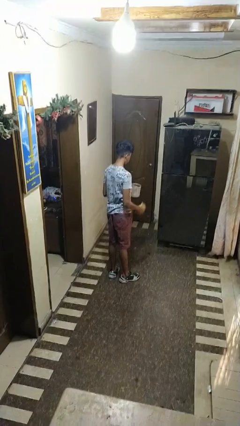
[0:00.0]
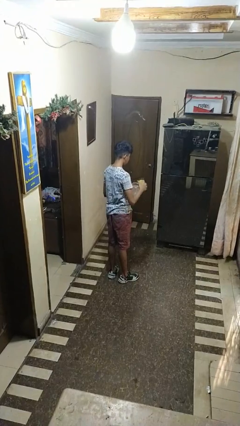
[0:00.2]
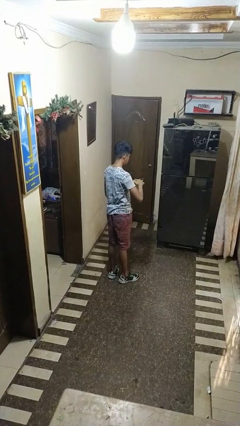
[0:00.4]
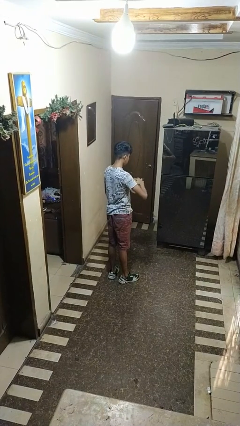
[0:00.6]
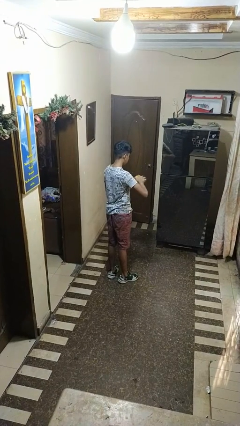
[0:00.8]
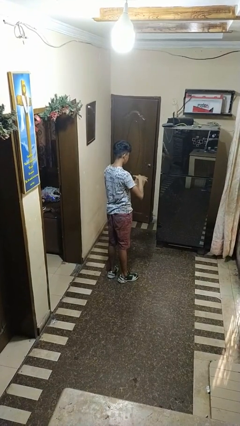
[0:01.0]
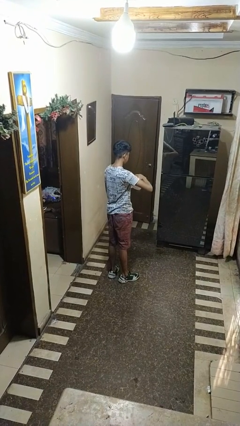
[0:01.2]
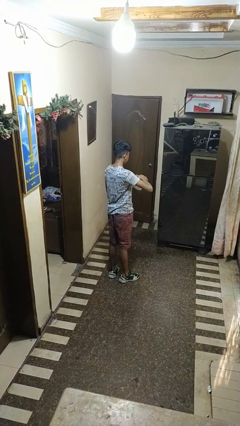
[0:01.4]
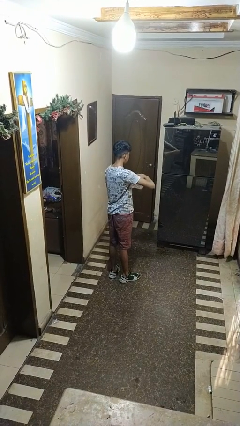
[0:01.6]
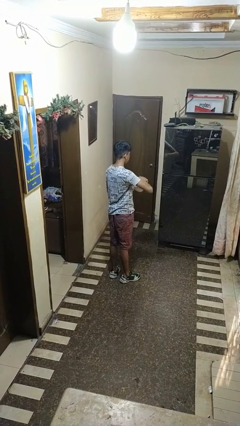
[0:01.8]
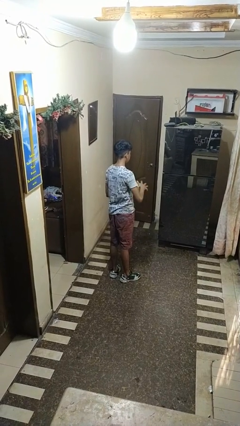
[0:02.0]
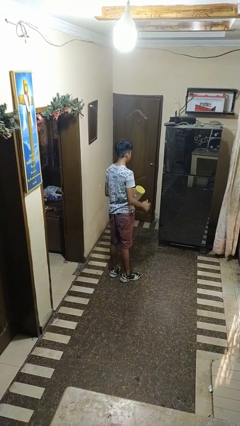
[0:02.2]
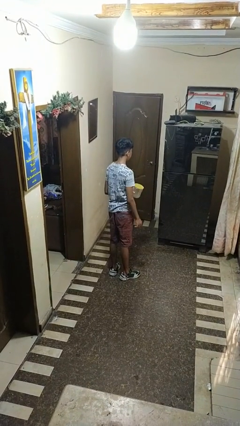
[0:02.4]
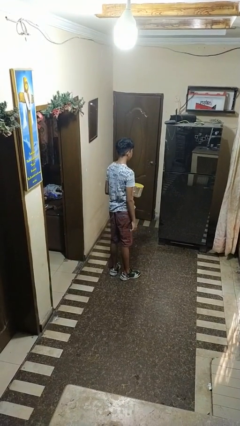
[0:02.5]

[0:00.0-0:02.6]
person closes jar

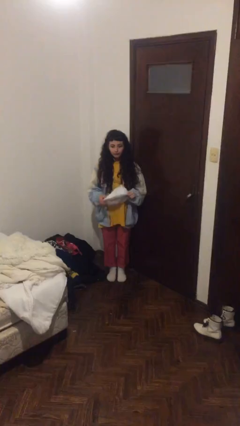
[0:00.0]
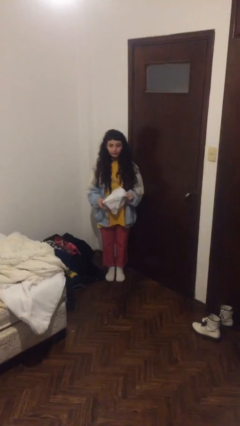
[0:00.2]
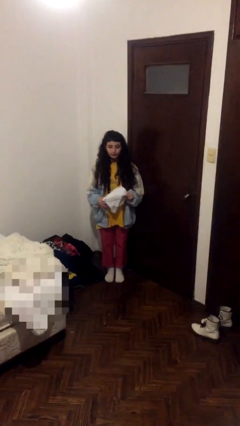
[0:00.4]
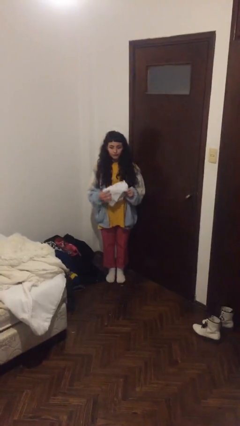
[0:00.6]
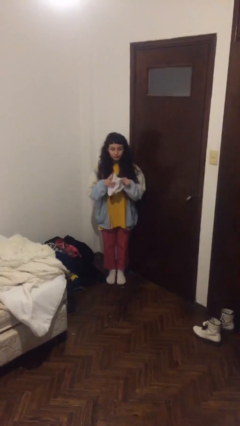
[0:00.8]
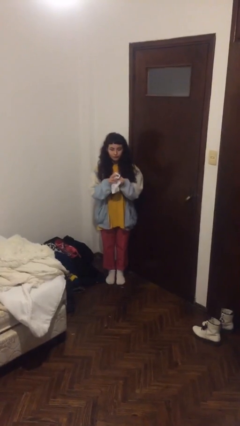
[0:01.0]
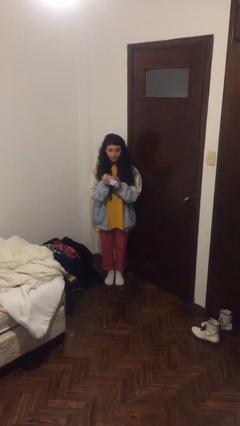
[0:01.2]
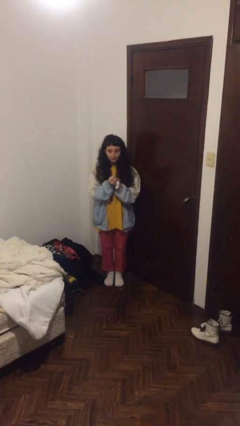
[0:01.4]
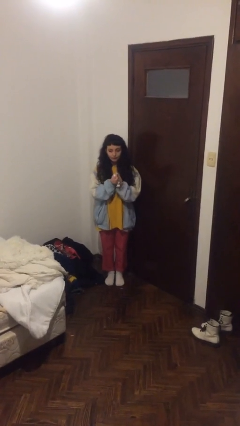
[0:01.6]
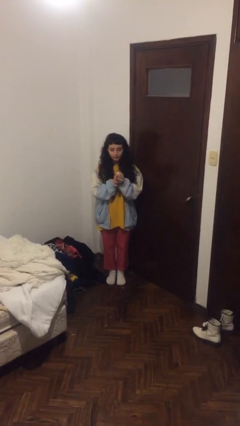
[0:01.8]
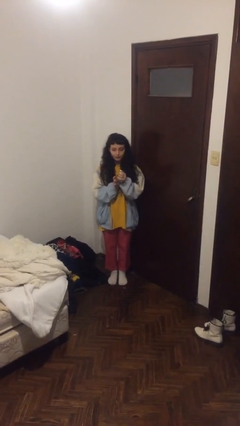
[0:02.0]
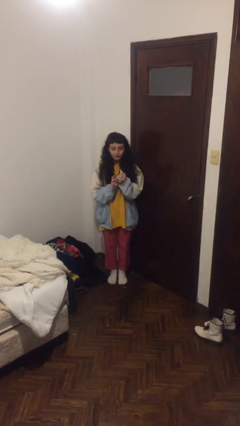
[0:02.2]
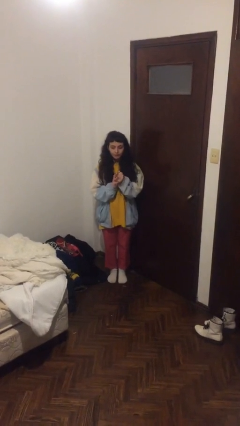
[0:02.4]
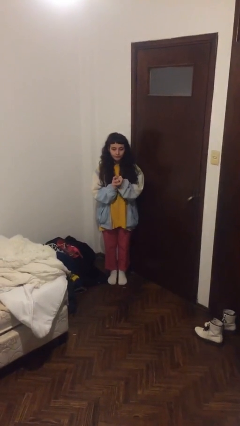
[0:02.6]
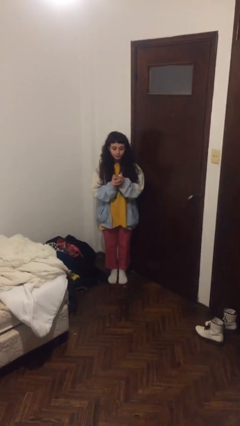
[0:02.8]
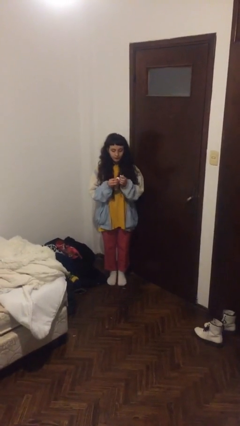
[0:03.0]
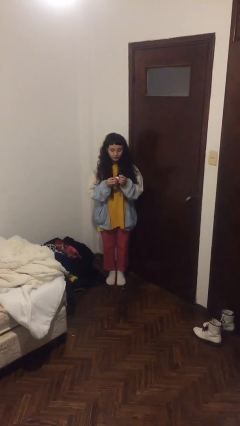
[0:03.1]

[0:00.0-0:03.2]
person crumples paper

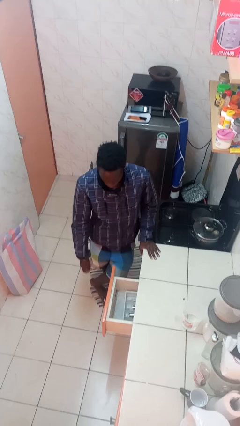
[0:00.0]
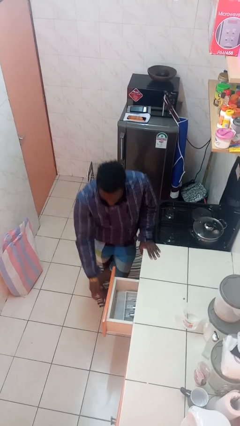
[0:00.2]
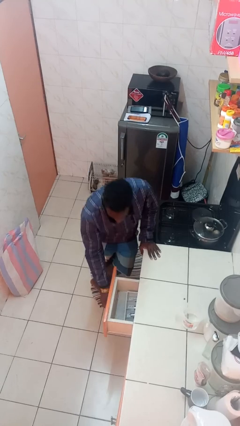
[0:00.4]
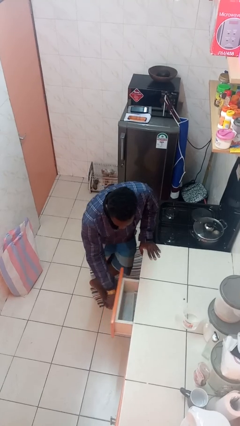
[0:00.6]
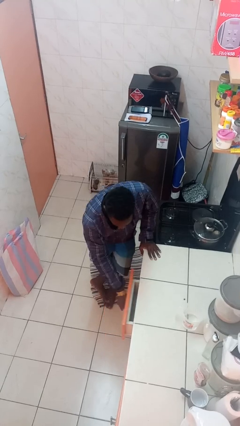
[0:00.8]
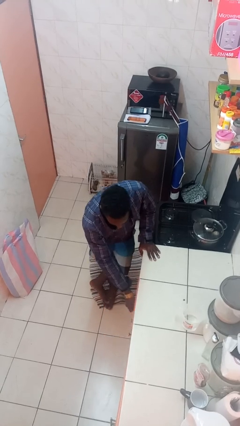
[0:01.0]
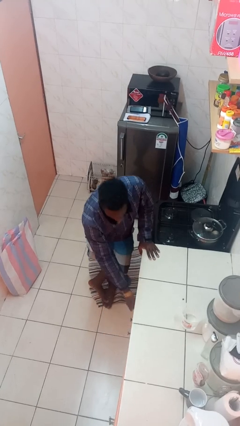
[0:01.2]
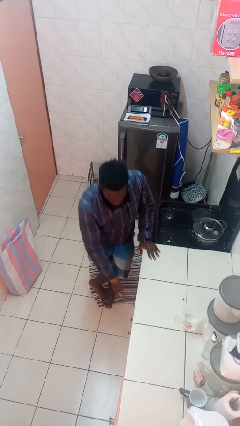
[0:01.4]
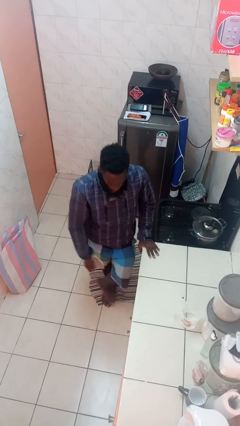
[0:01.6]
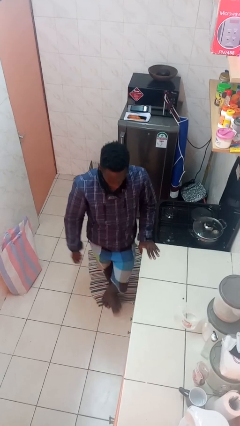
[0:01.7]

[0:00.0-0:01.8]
person closes kitchen drawer

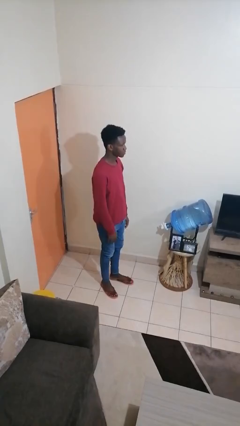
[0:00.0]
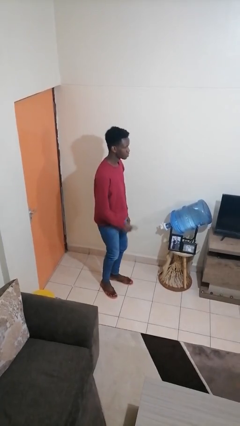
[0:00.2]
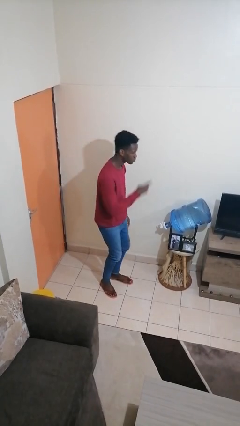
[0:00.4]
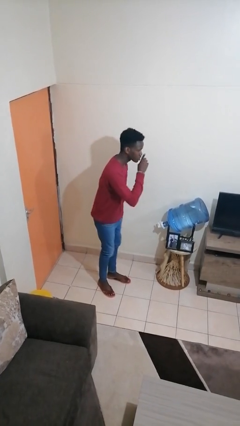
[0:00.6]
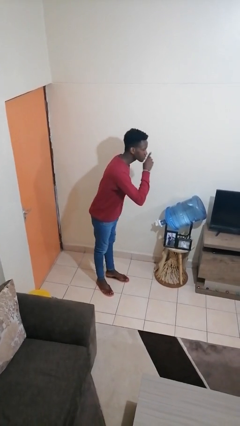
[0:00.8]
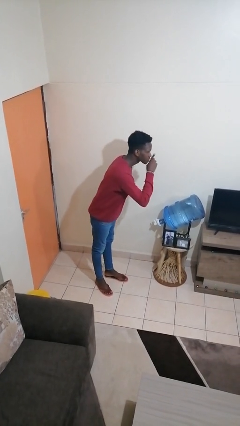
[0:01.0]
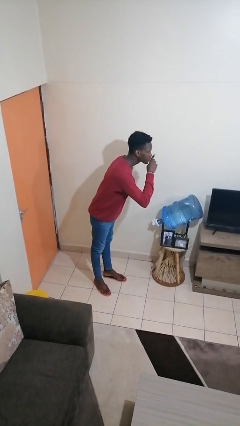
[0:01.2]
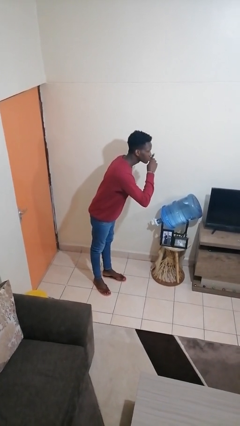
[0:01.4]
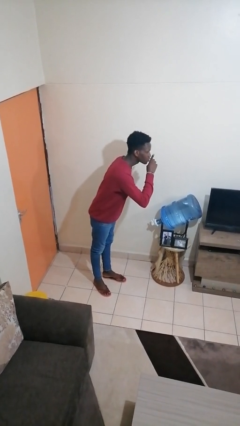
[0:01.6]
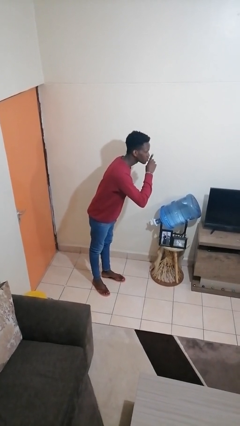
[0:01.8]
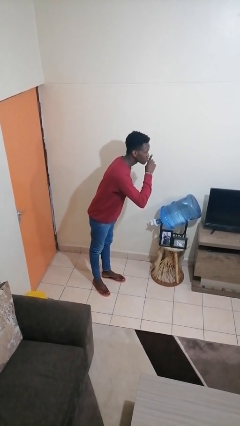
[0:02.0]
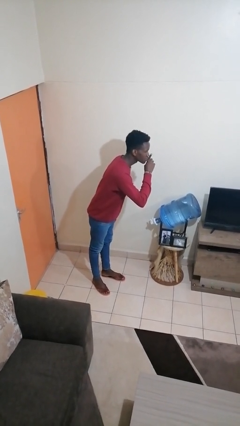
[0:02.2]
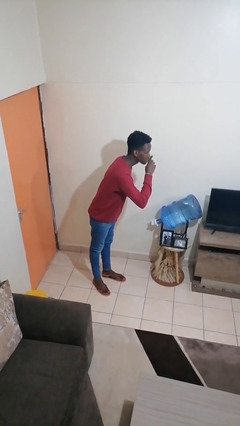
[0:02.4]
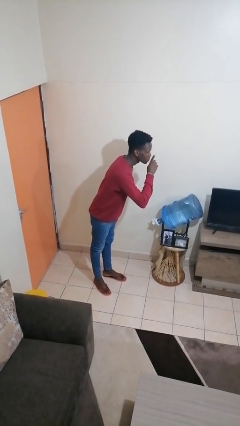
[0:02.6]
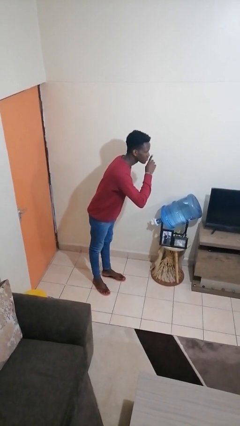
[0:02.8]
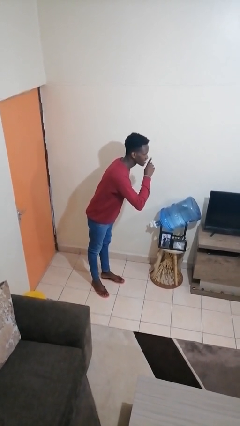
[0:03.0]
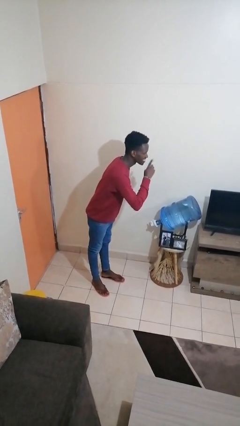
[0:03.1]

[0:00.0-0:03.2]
person gestures be quiet

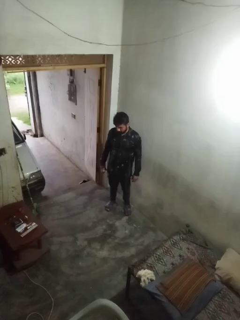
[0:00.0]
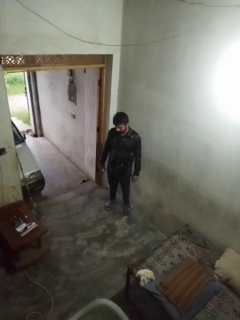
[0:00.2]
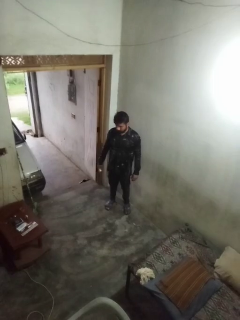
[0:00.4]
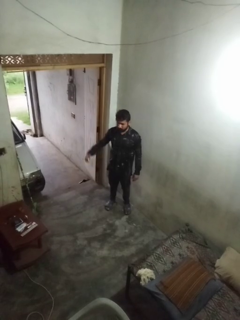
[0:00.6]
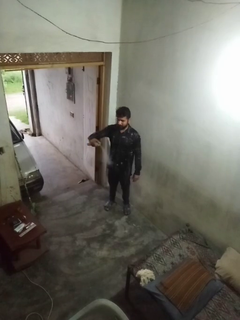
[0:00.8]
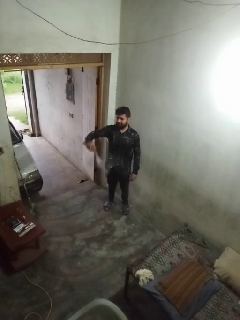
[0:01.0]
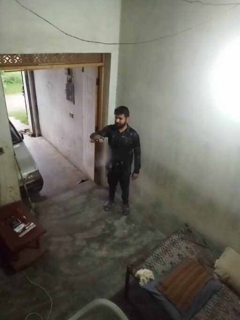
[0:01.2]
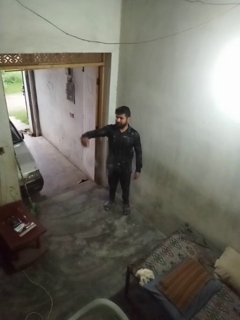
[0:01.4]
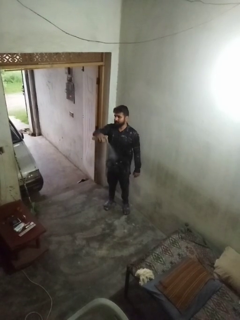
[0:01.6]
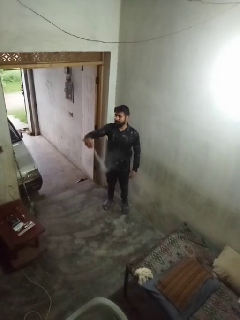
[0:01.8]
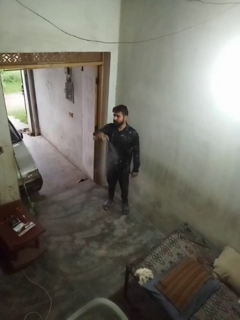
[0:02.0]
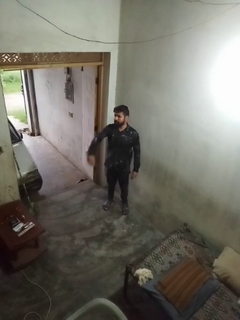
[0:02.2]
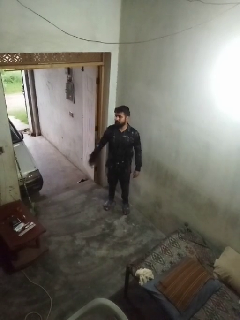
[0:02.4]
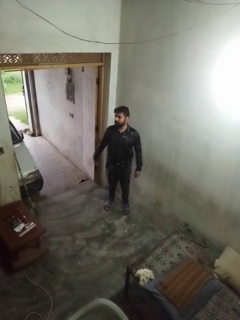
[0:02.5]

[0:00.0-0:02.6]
person applies deodorant

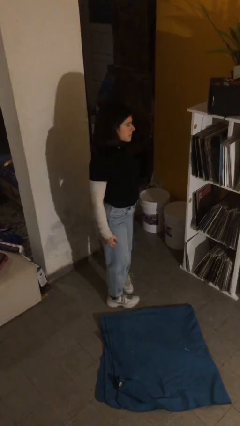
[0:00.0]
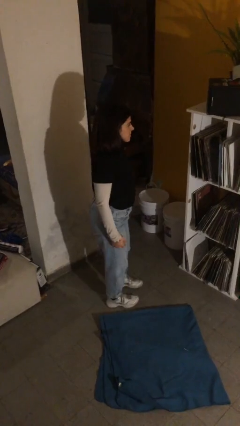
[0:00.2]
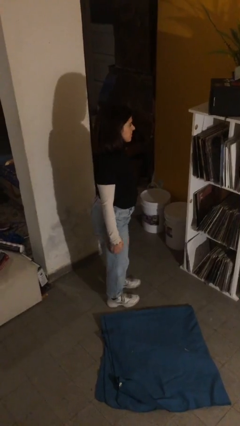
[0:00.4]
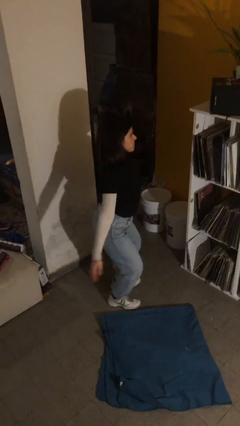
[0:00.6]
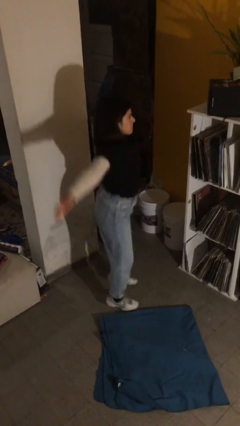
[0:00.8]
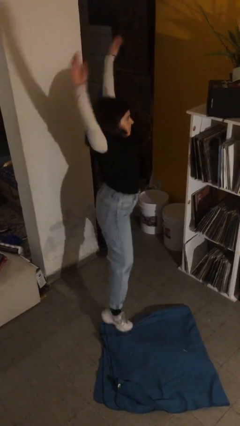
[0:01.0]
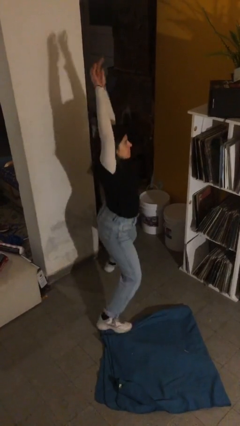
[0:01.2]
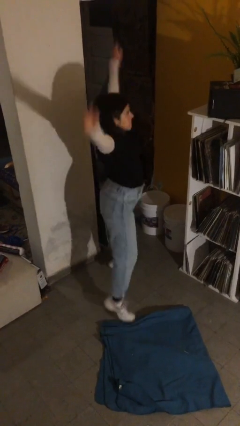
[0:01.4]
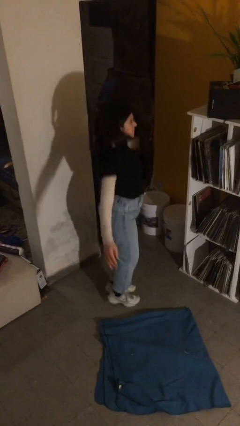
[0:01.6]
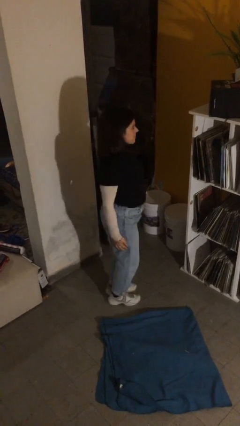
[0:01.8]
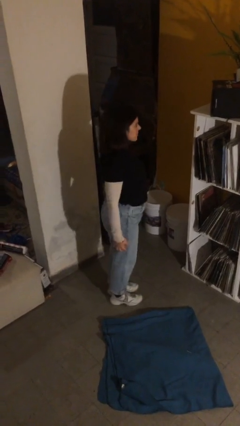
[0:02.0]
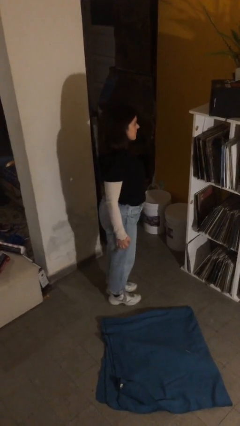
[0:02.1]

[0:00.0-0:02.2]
person exercises with jumping jacks

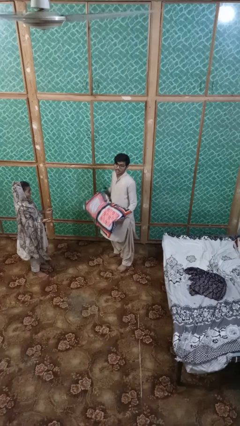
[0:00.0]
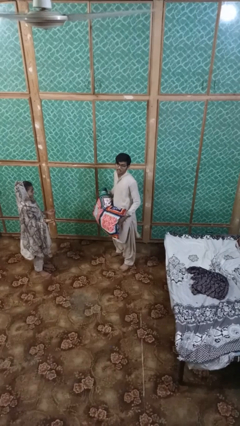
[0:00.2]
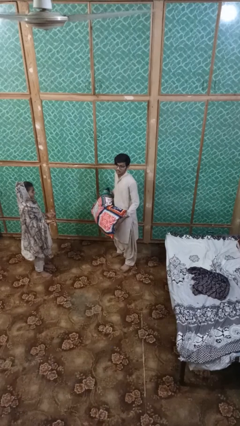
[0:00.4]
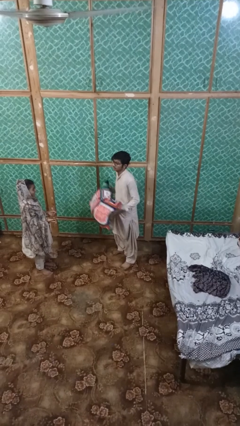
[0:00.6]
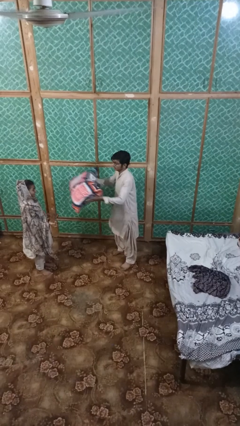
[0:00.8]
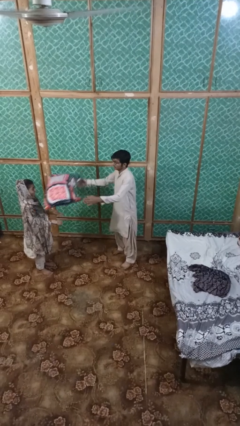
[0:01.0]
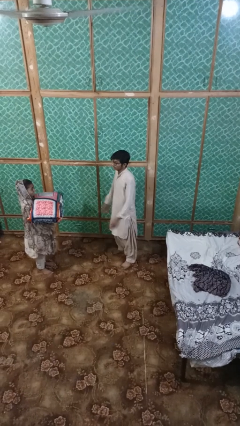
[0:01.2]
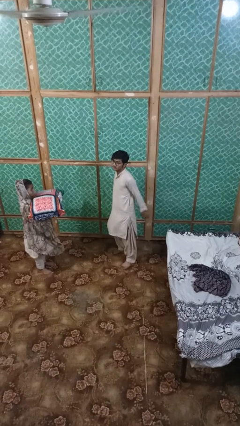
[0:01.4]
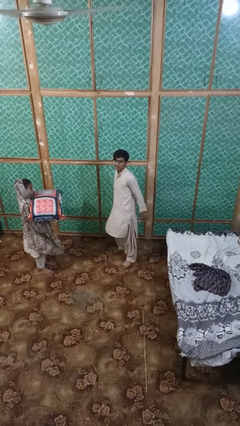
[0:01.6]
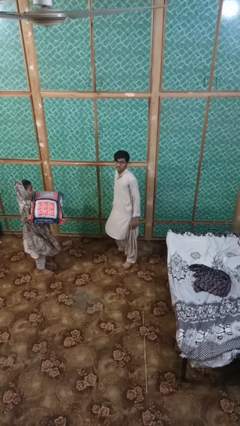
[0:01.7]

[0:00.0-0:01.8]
person throws object to person

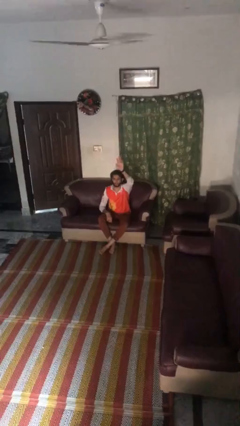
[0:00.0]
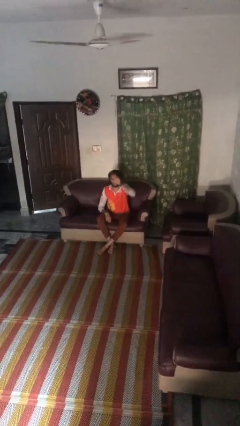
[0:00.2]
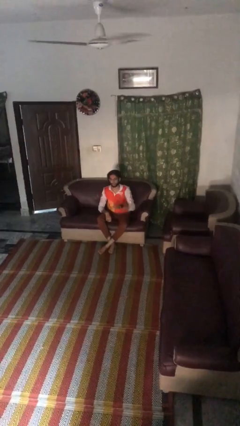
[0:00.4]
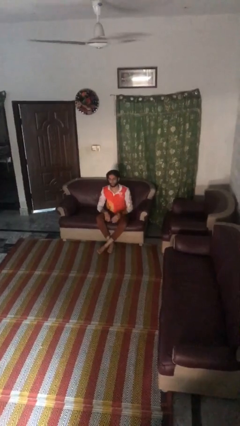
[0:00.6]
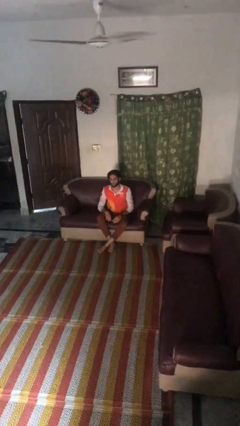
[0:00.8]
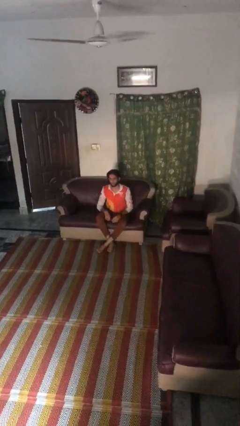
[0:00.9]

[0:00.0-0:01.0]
person gestures lower hand
